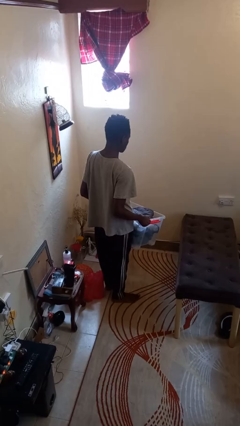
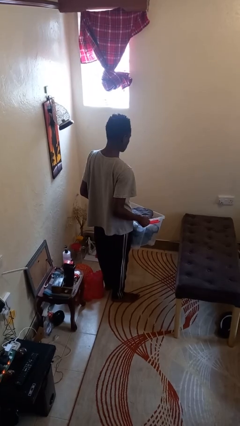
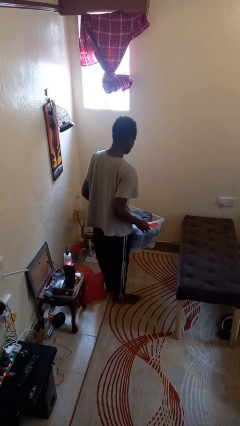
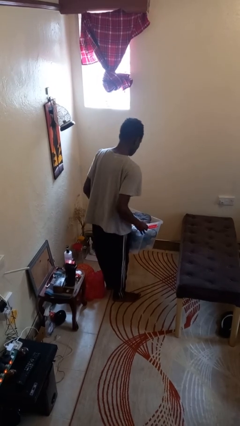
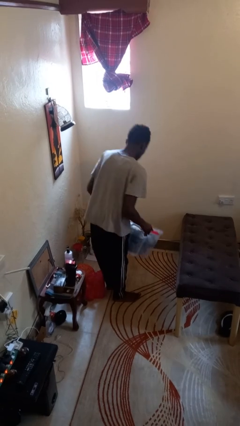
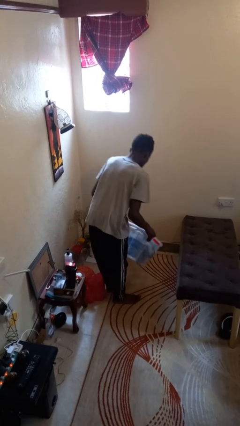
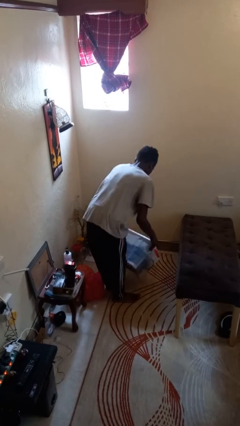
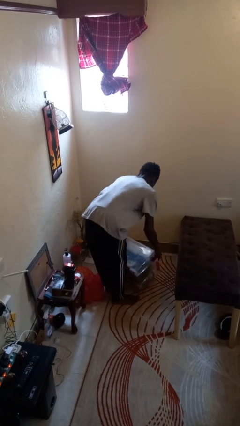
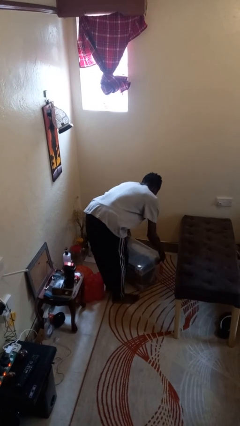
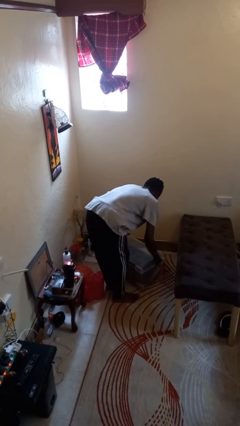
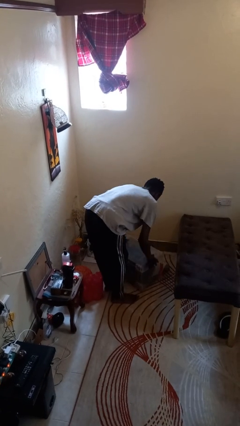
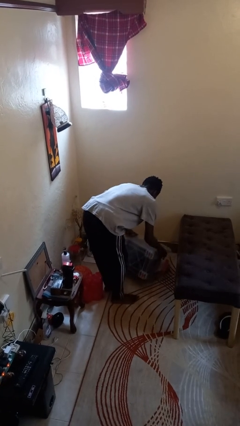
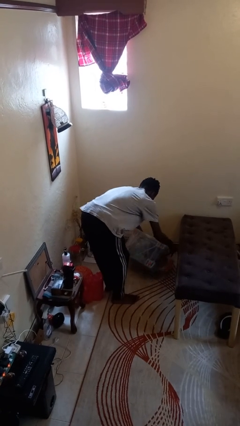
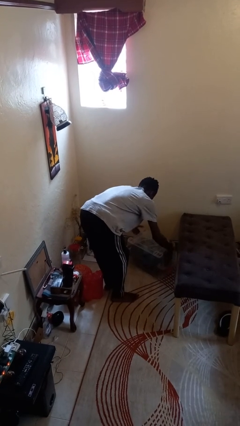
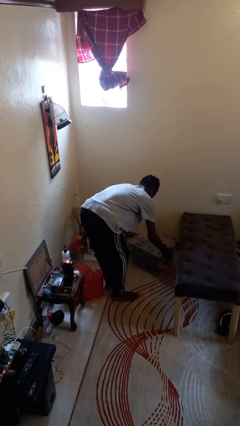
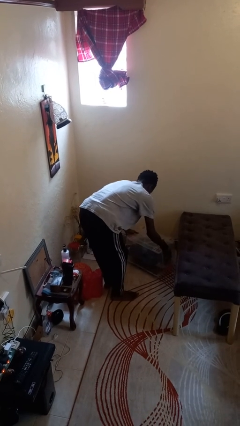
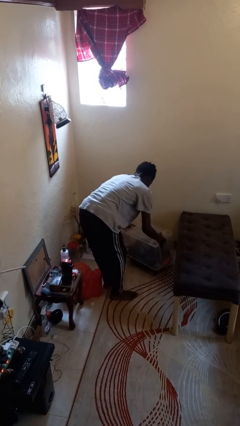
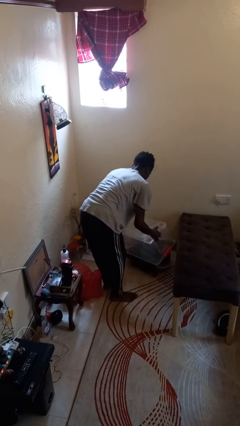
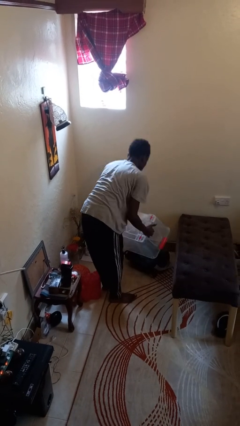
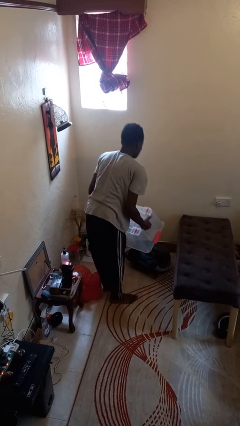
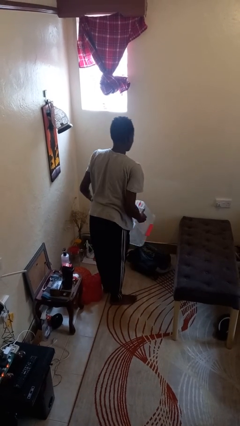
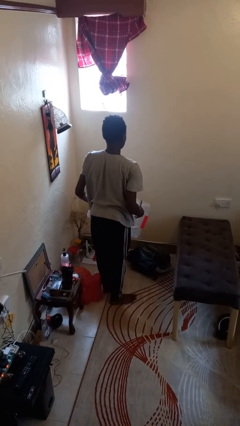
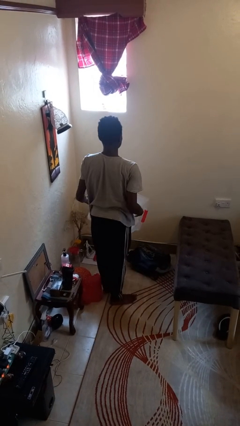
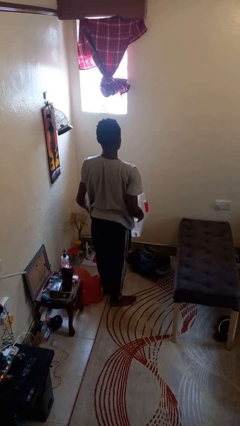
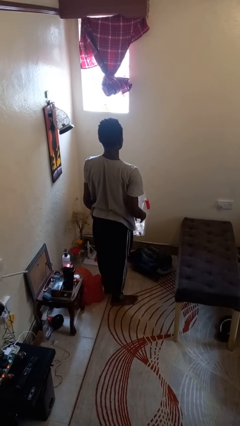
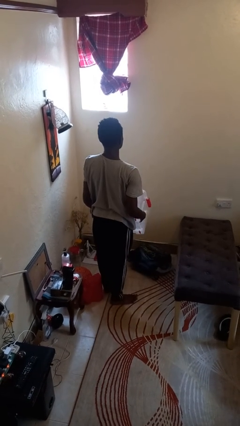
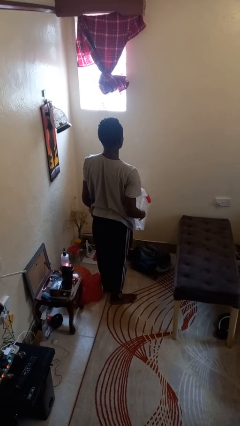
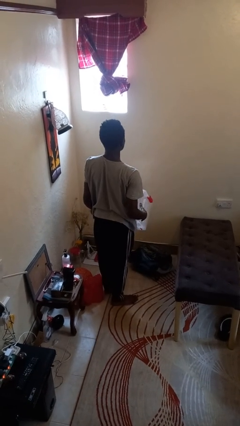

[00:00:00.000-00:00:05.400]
person unloads box onto floor

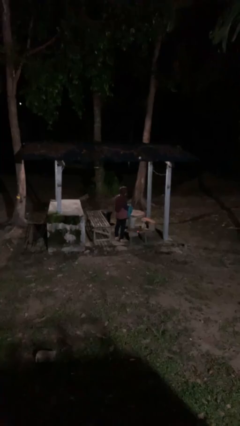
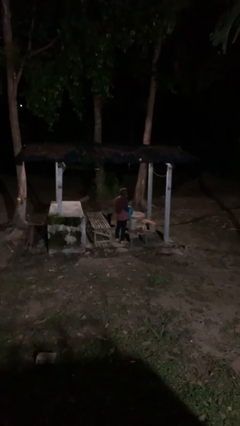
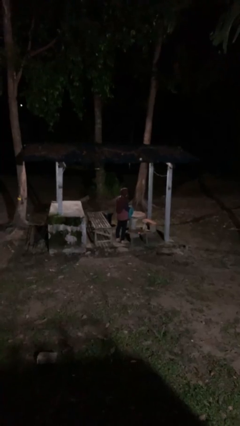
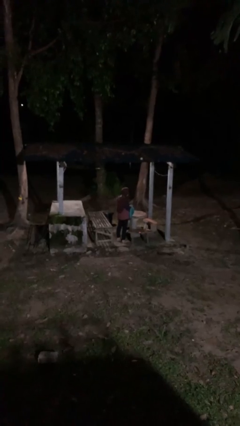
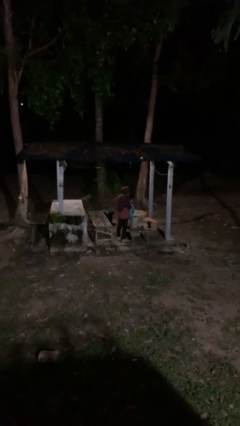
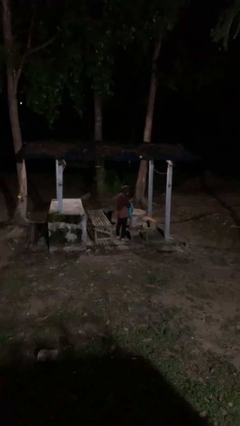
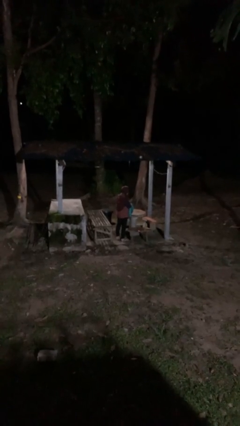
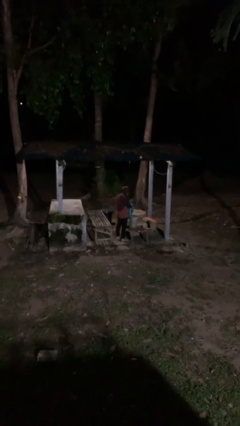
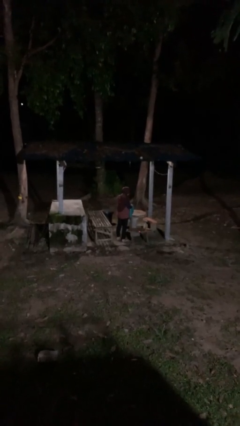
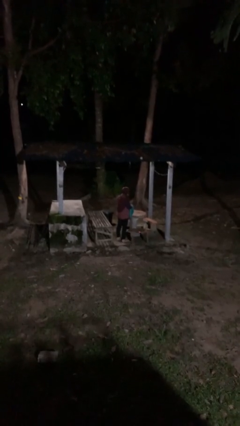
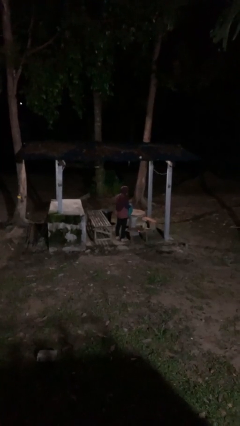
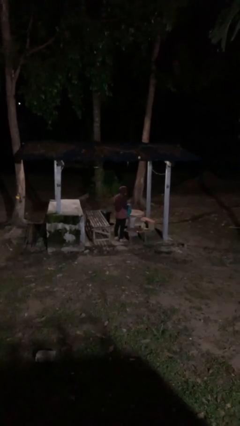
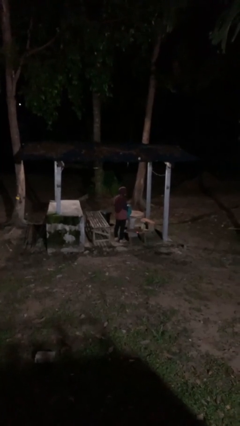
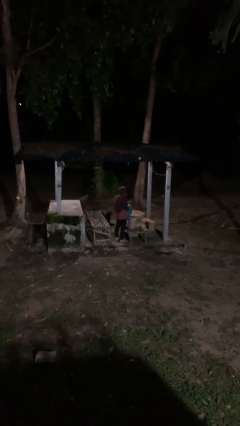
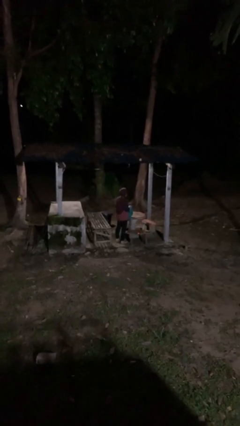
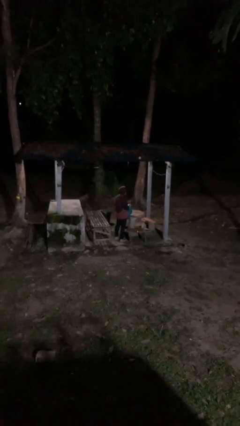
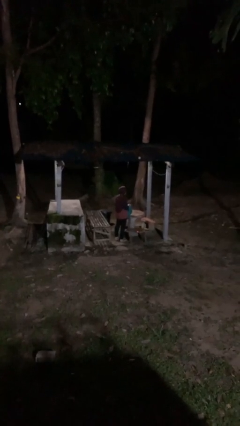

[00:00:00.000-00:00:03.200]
person searches in bag

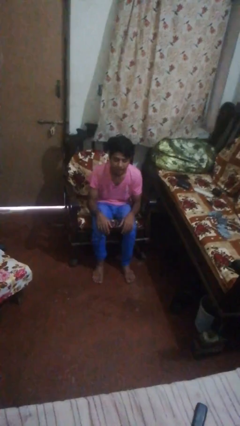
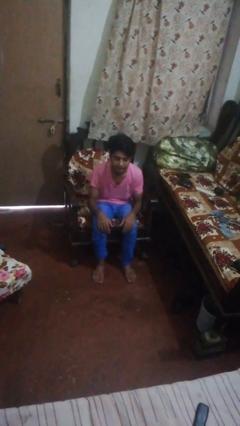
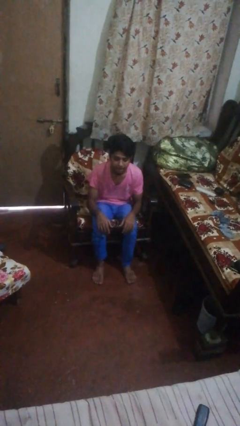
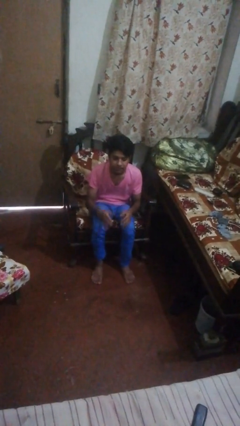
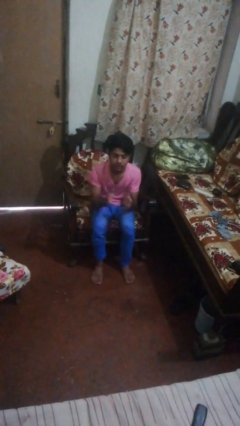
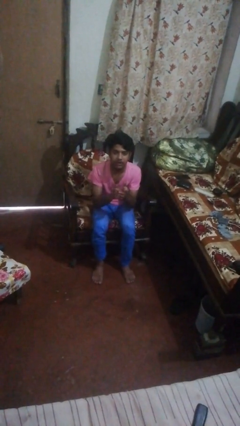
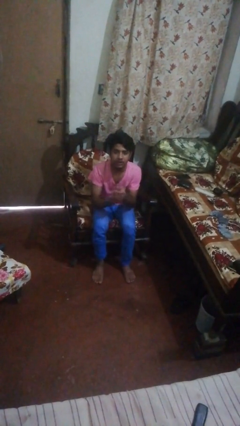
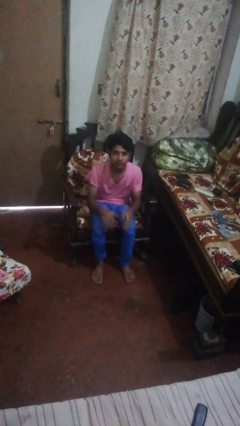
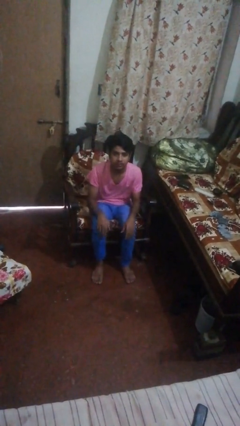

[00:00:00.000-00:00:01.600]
person claps hands

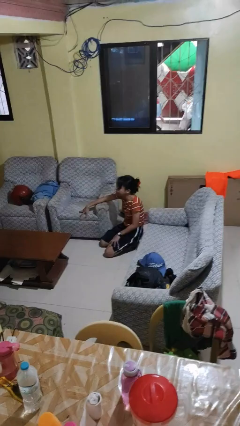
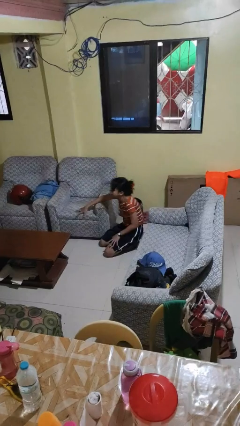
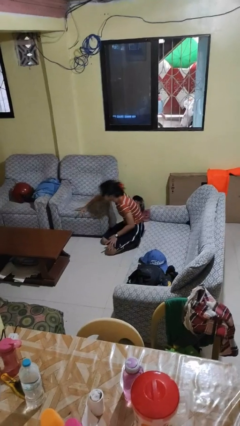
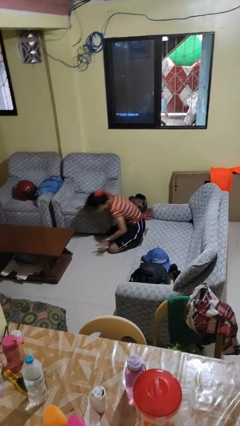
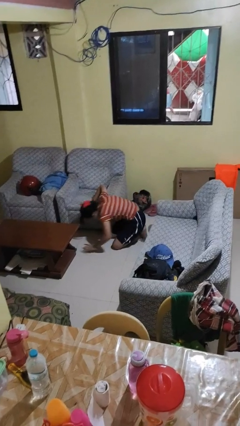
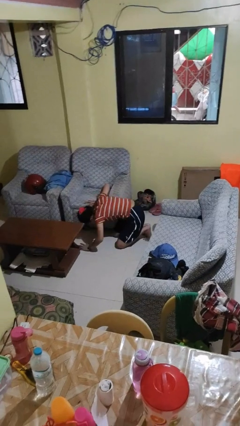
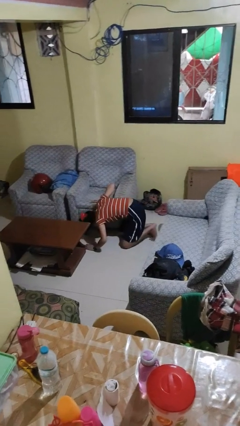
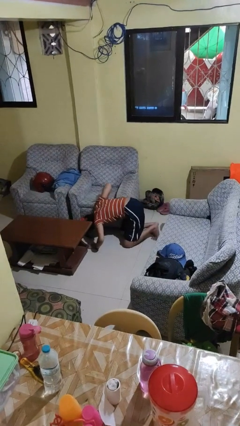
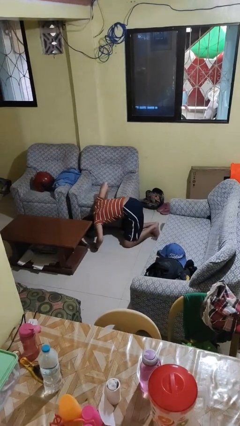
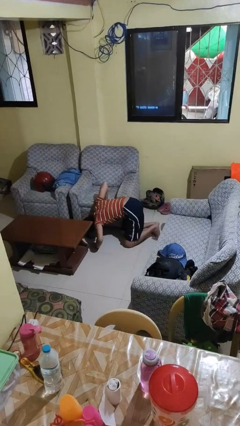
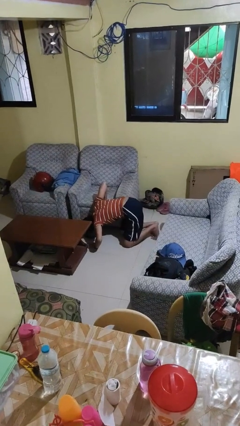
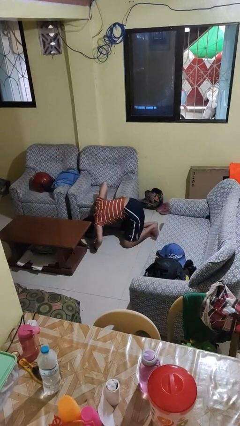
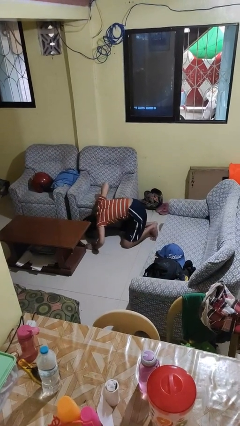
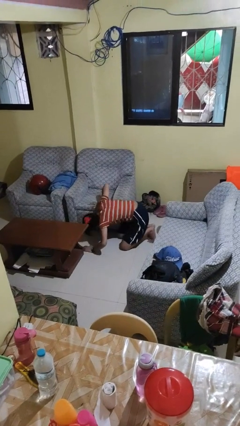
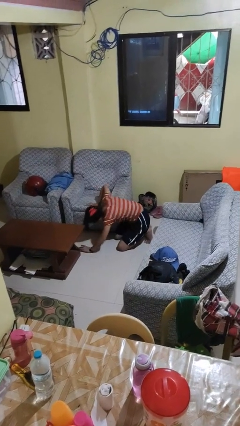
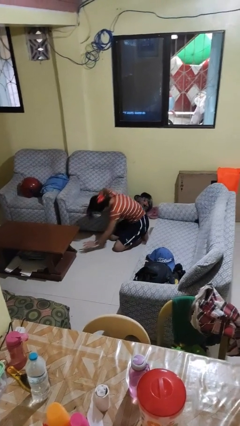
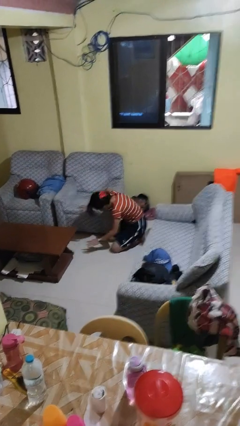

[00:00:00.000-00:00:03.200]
person searches under couch

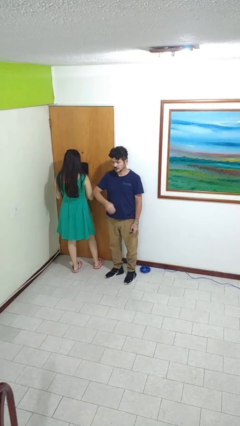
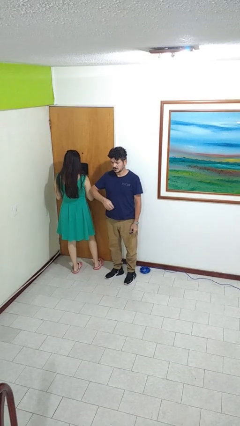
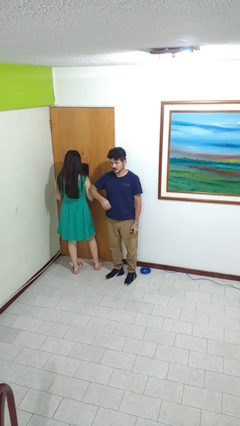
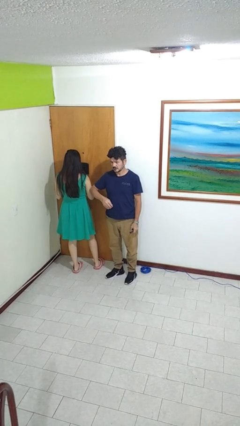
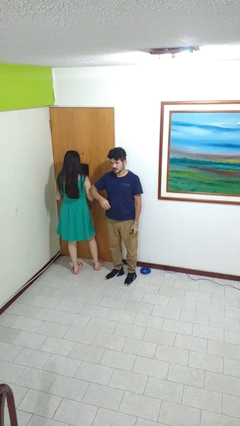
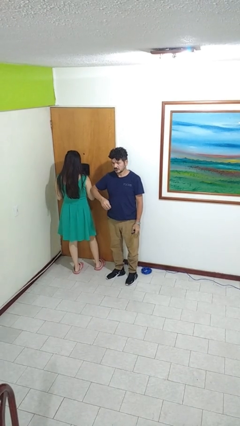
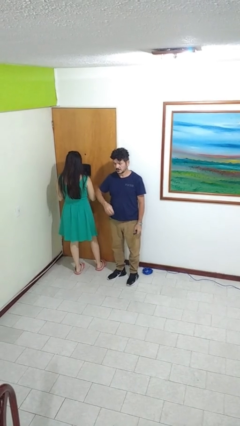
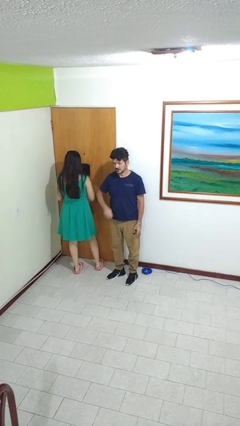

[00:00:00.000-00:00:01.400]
person nudges person with elbow

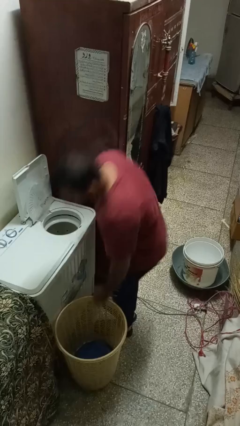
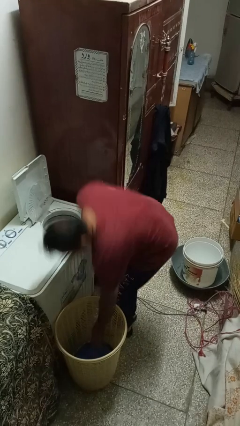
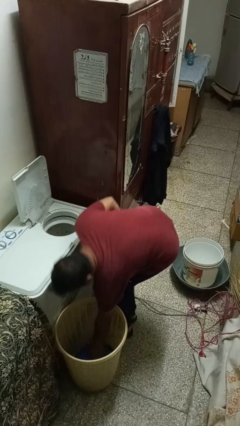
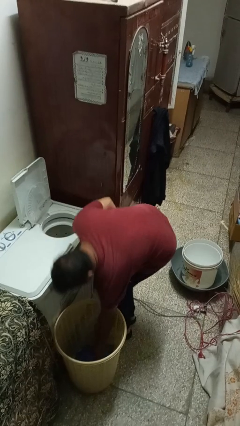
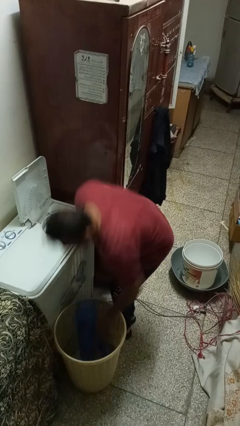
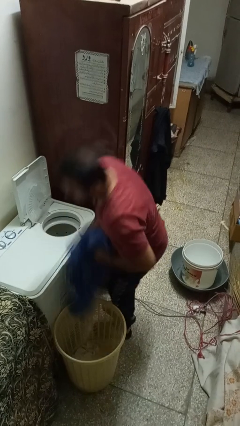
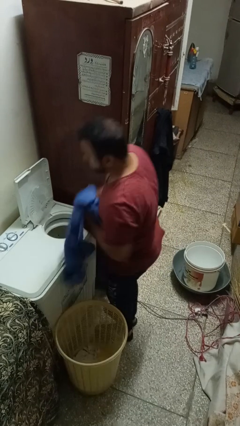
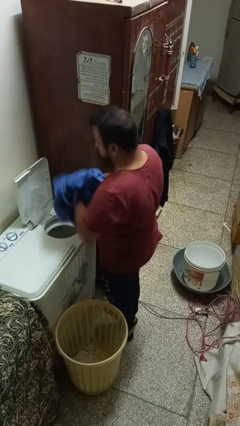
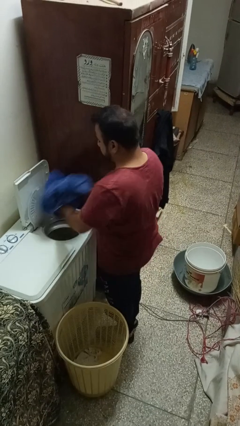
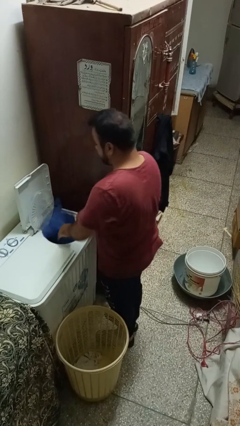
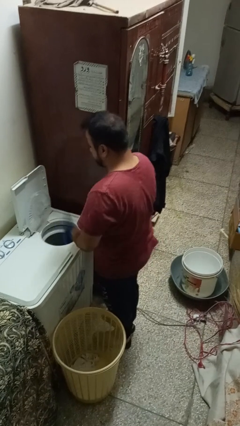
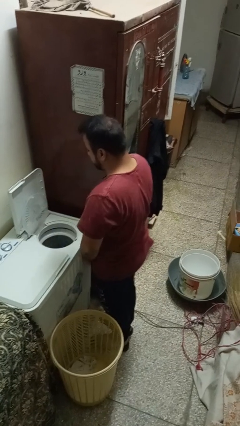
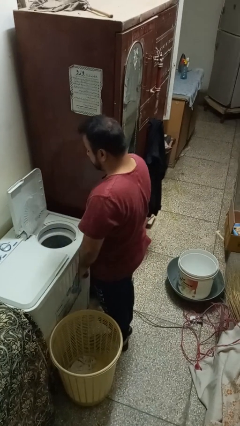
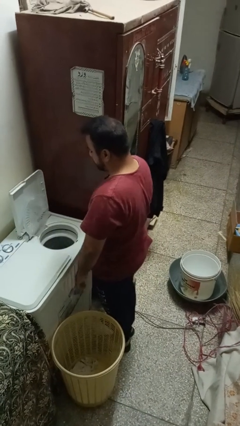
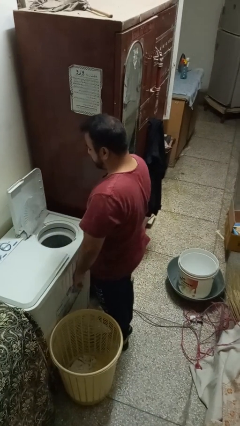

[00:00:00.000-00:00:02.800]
person loads dryer
